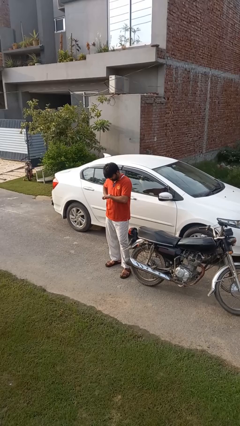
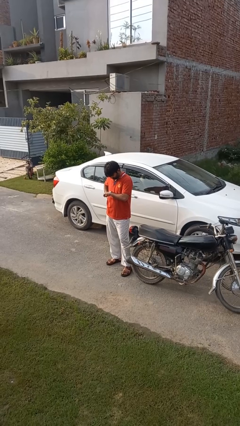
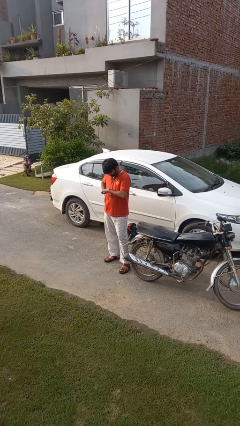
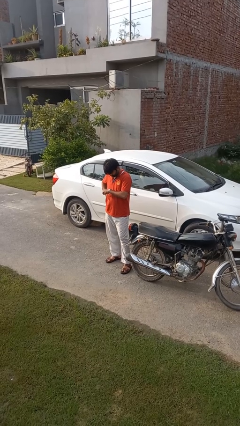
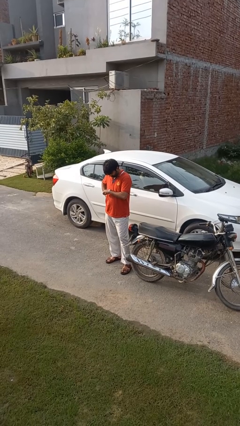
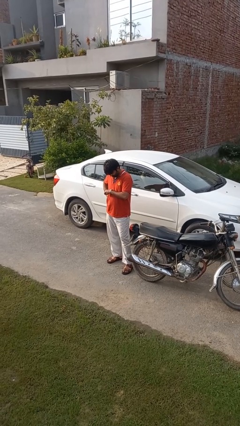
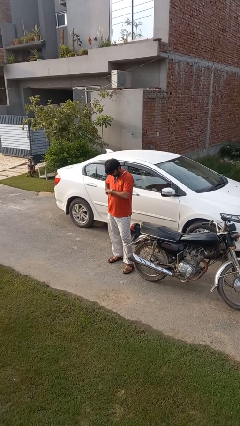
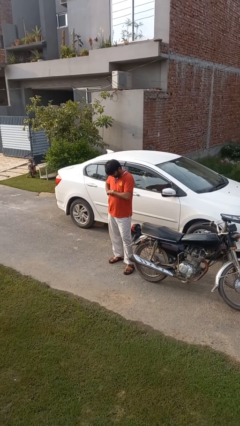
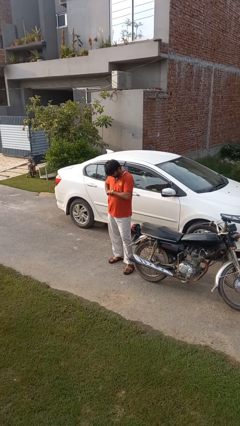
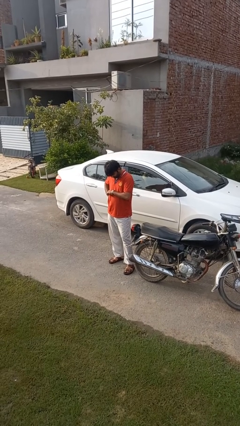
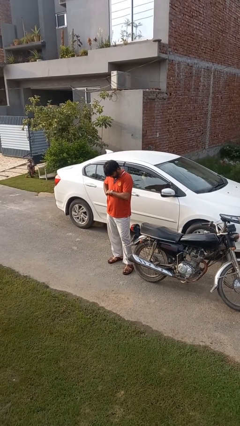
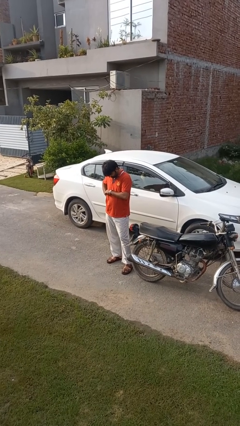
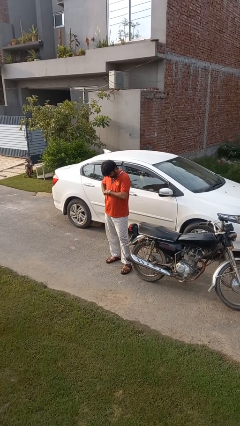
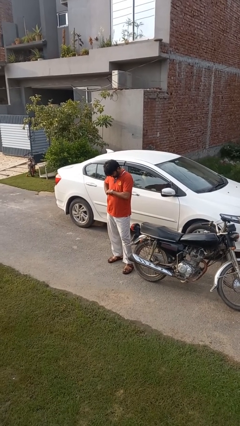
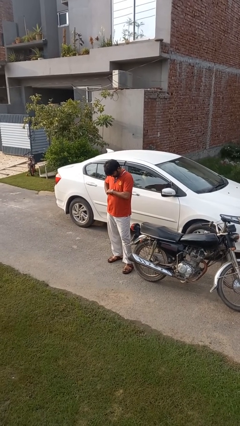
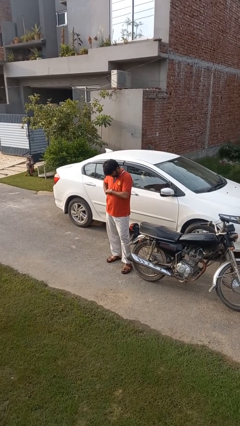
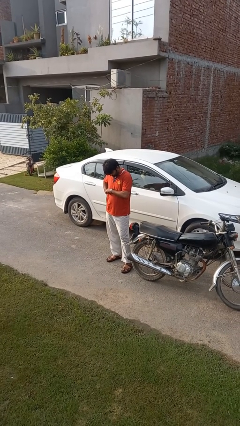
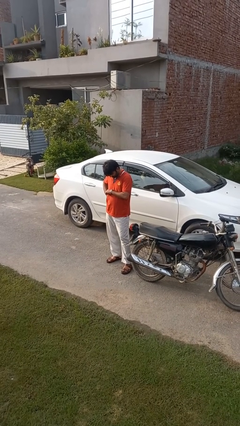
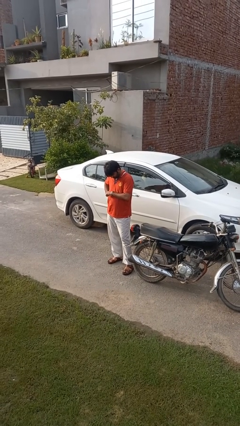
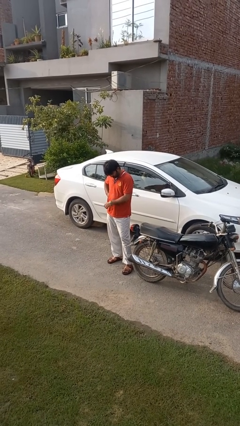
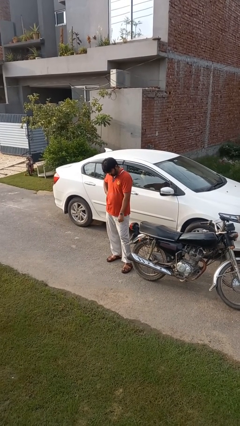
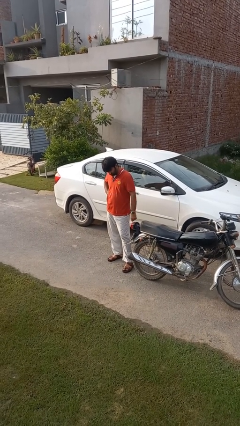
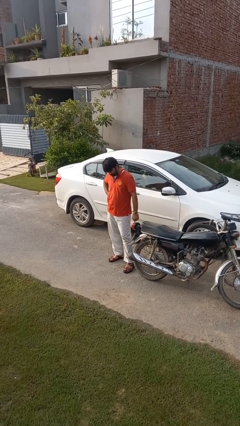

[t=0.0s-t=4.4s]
person looks at wristwatch

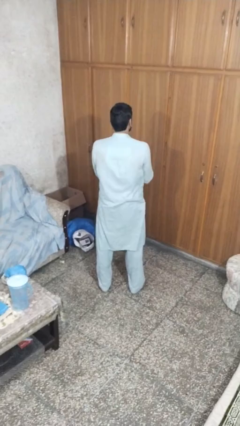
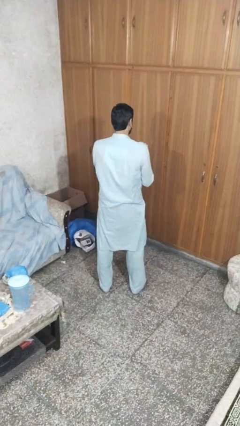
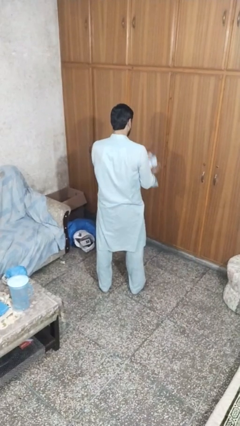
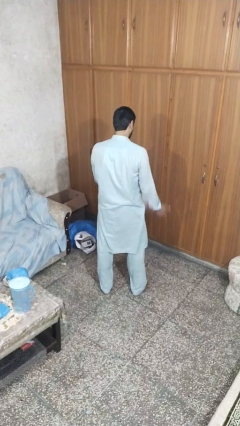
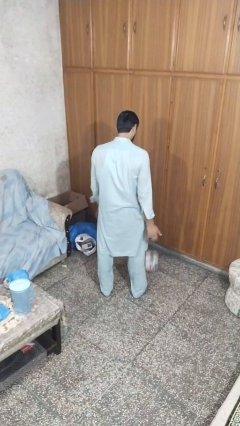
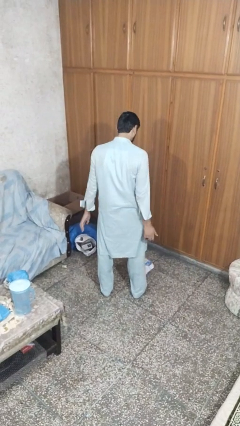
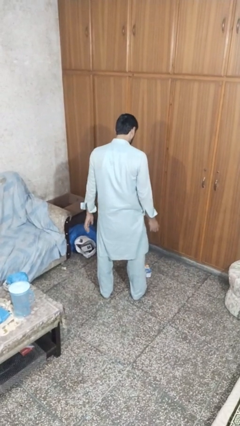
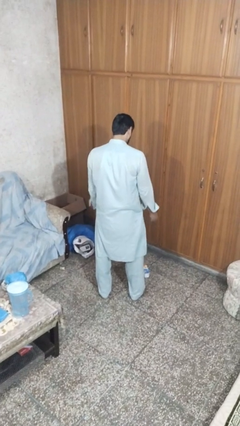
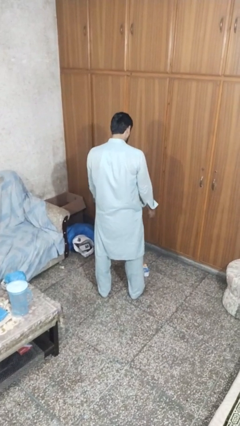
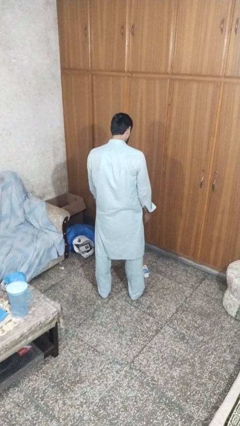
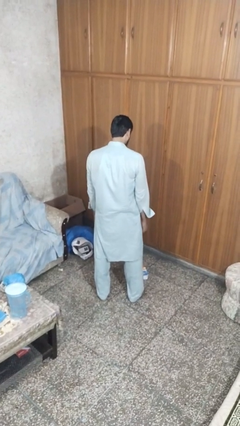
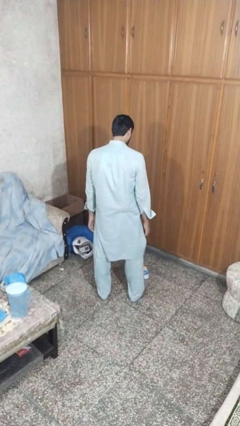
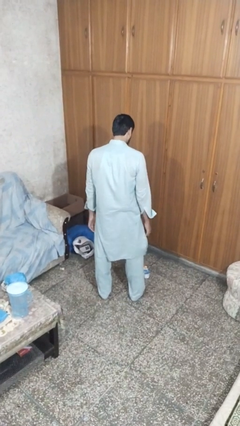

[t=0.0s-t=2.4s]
person catches dropped object

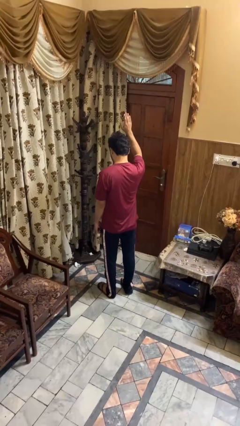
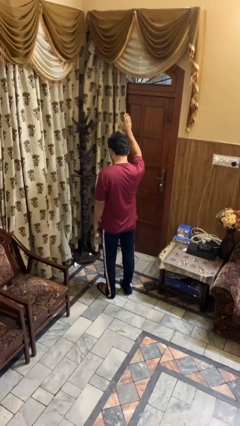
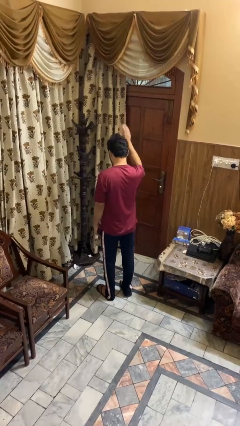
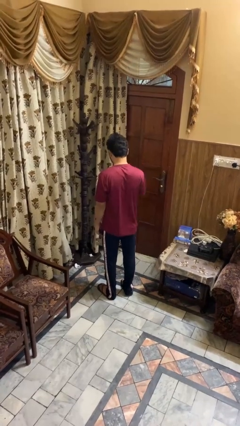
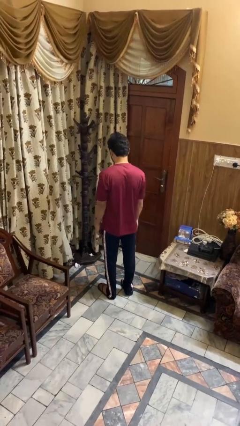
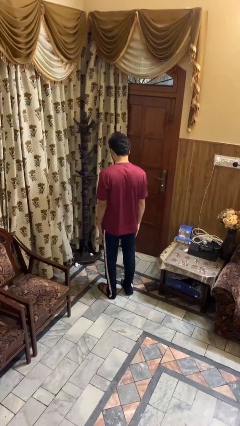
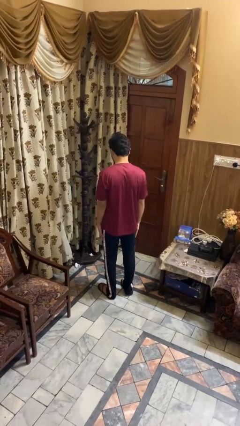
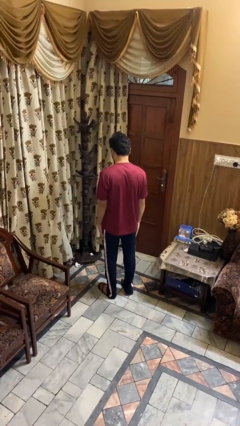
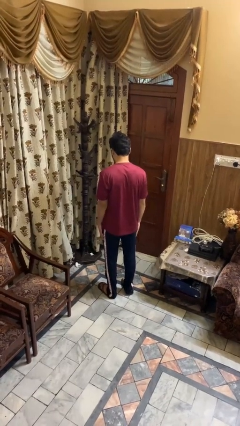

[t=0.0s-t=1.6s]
person gestures lower hand

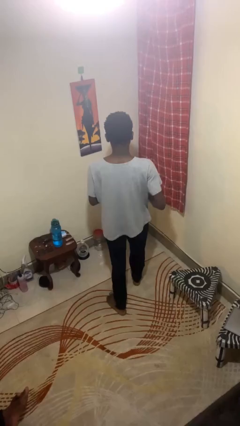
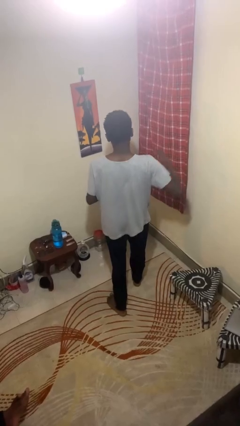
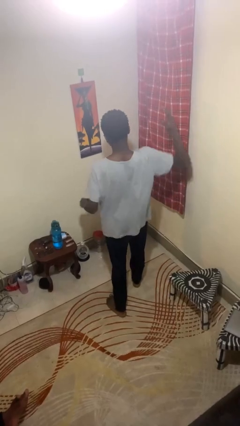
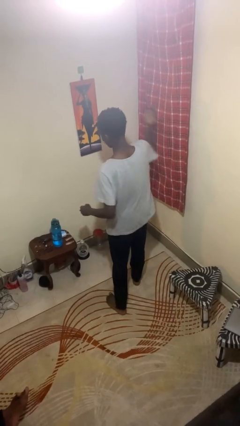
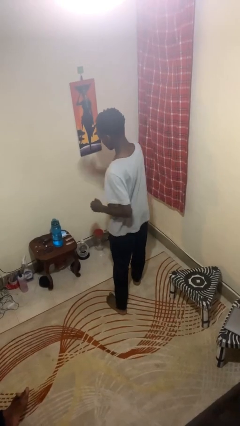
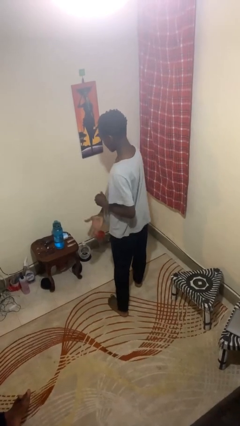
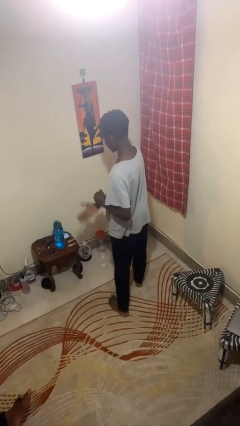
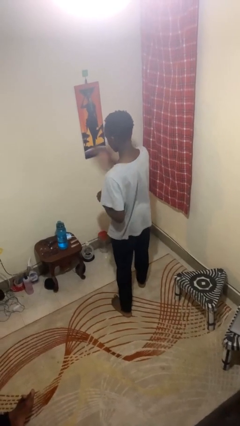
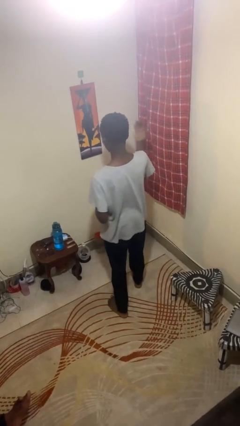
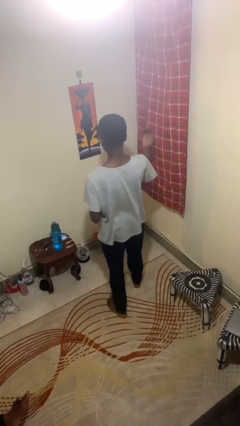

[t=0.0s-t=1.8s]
person karate chop

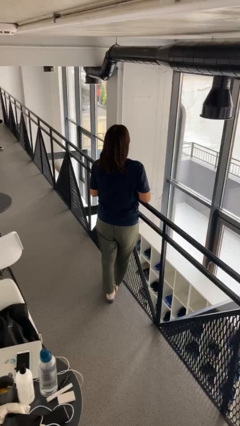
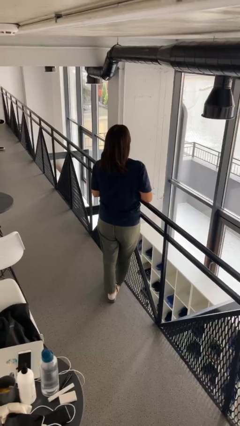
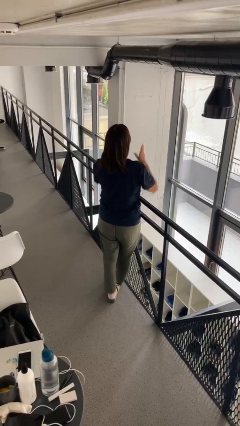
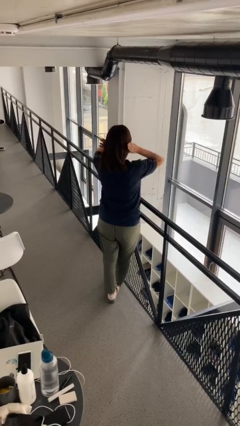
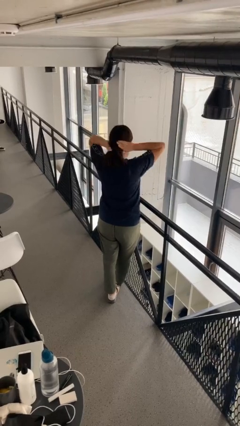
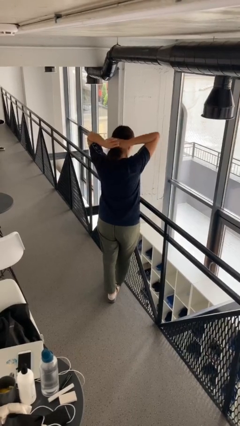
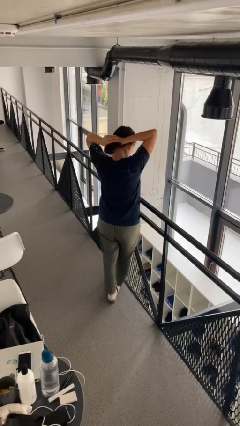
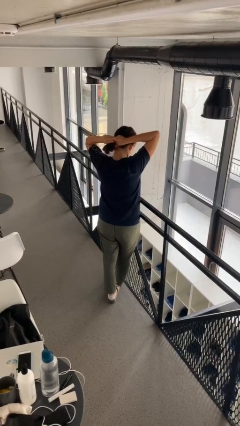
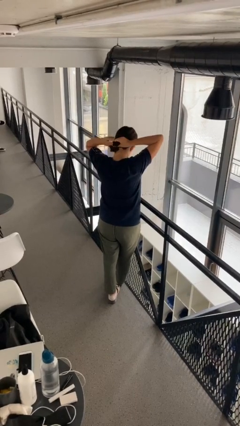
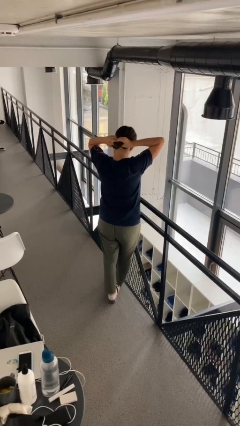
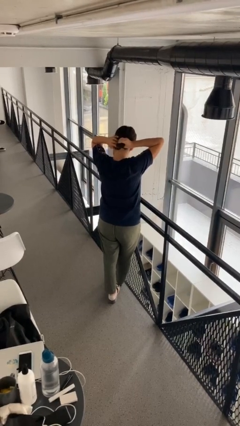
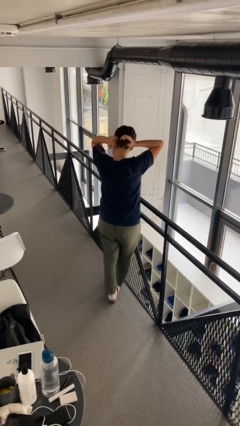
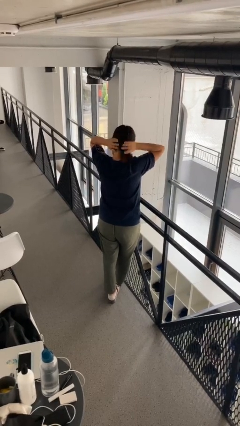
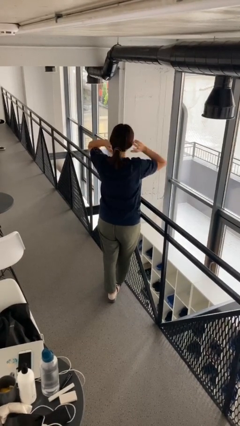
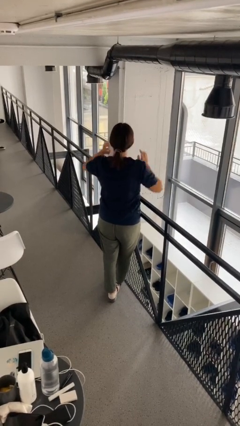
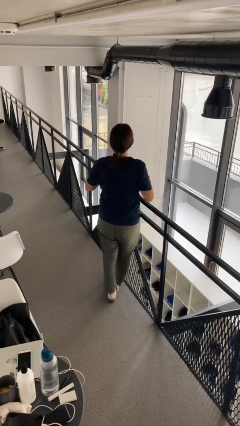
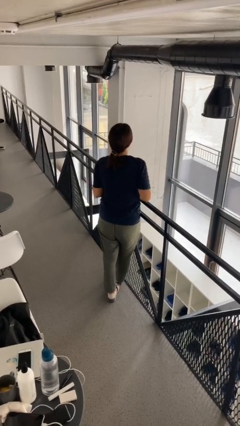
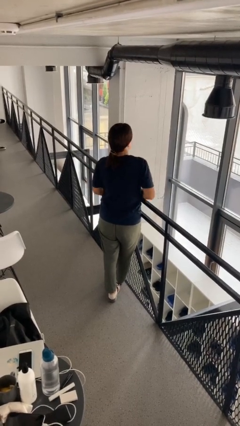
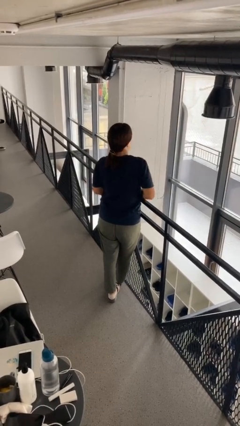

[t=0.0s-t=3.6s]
person puts hair in ponytail

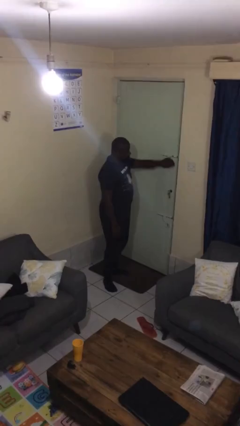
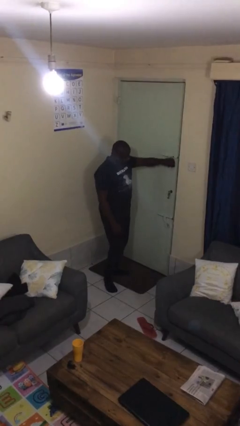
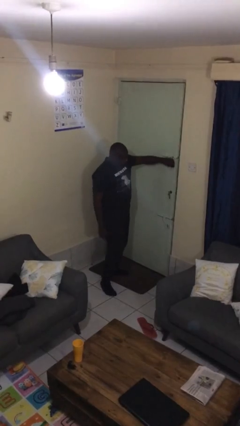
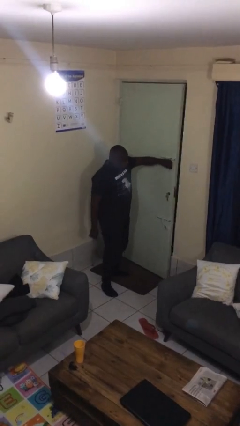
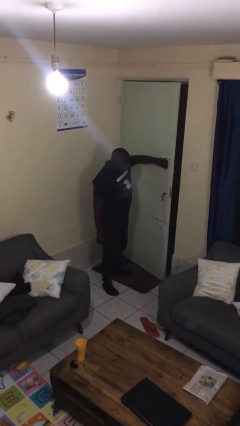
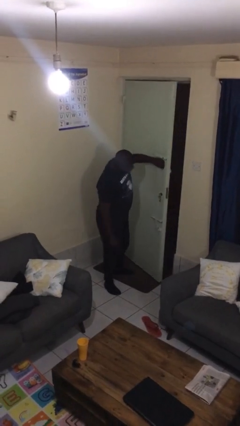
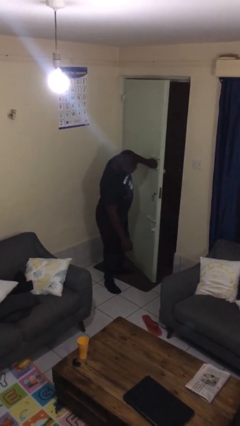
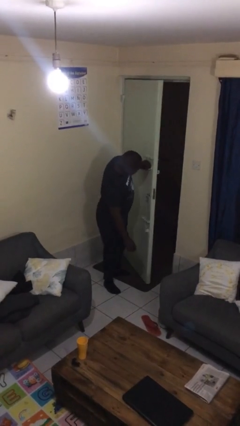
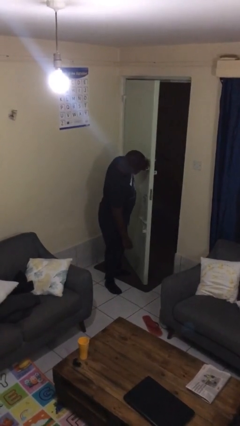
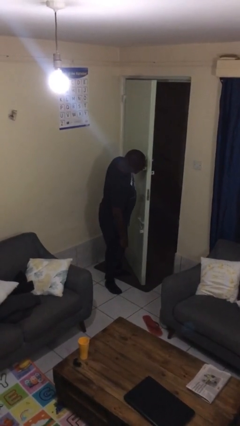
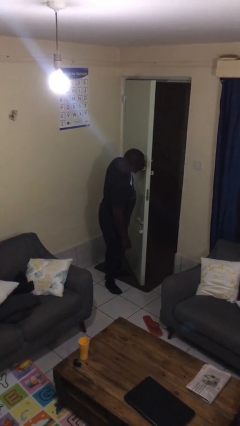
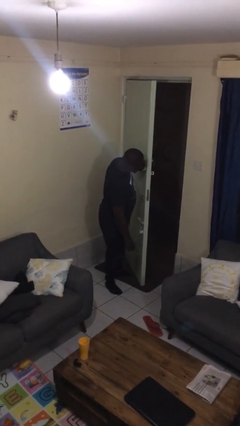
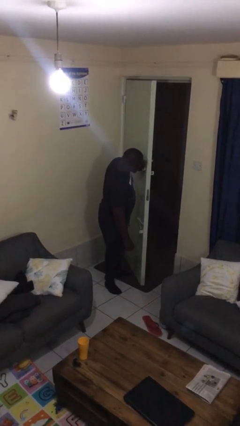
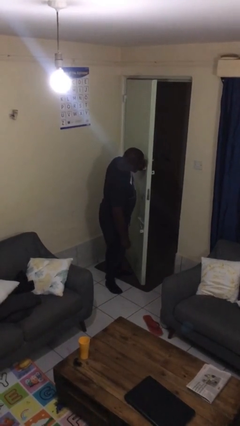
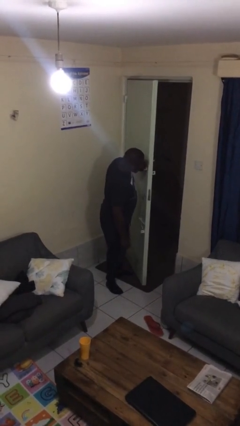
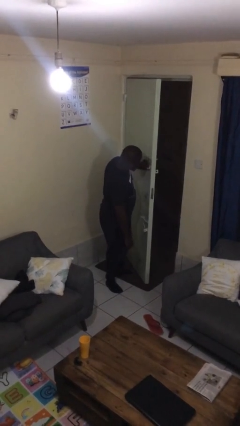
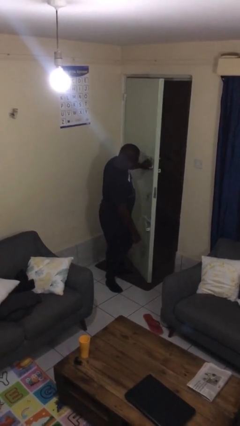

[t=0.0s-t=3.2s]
person opens facility door

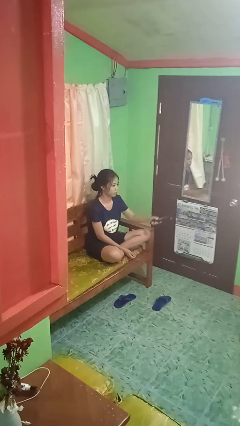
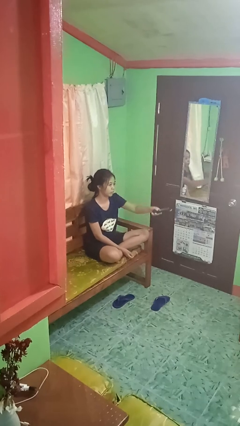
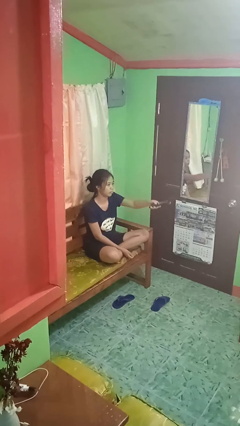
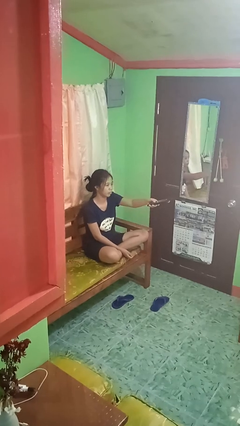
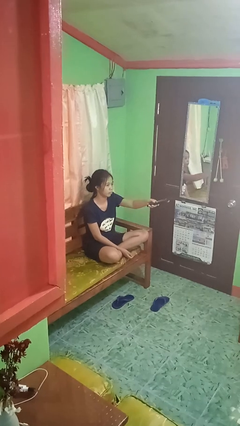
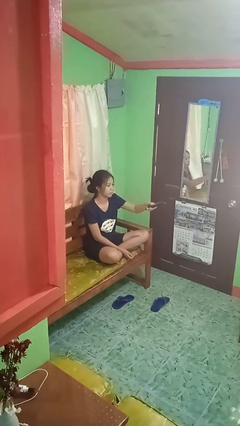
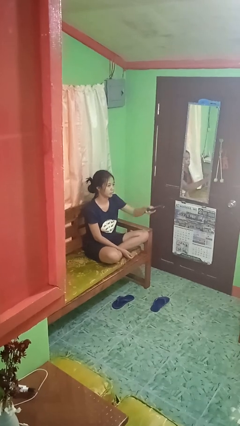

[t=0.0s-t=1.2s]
person uses television remote
